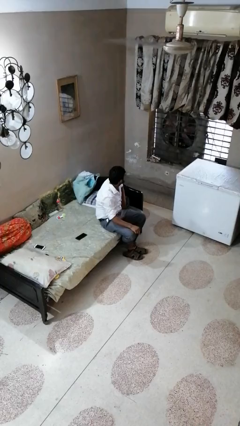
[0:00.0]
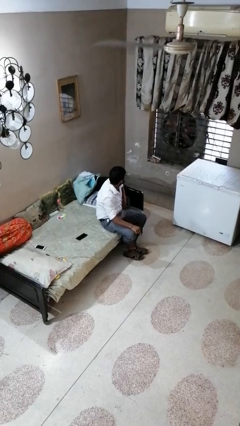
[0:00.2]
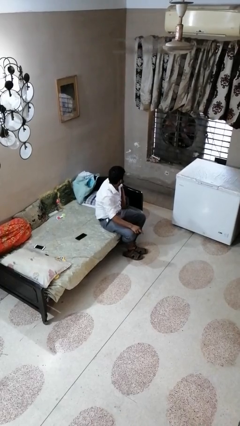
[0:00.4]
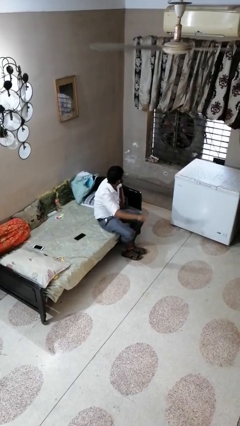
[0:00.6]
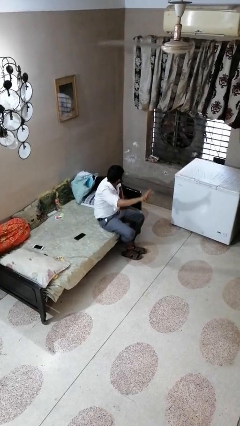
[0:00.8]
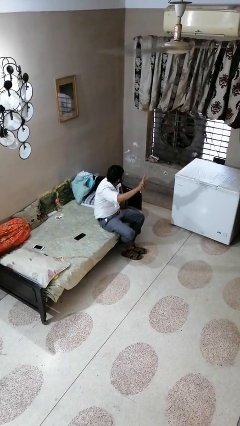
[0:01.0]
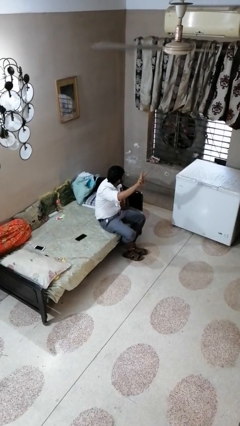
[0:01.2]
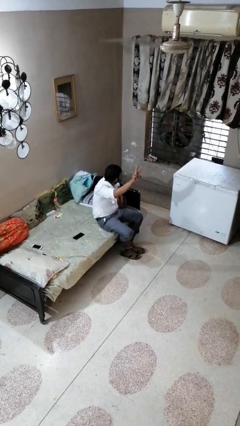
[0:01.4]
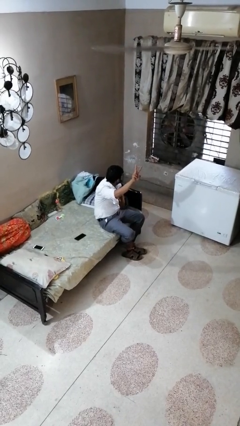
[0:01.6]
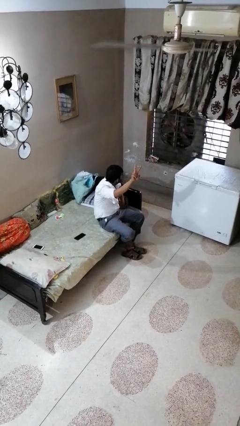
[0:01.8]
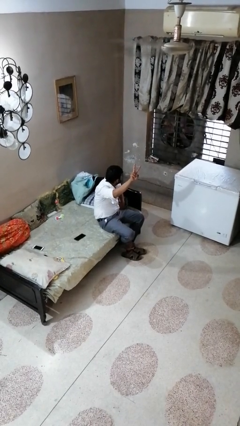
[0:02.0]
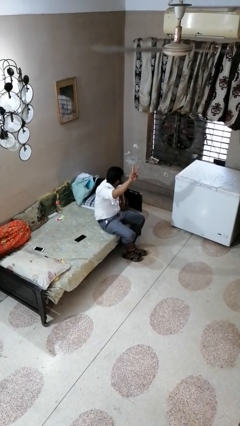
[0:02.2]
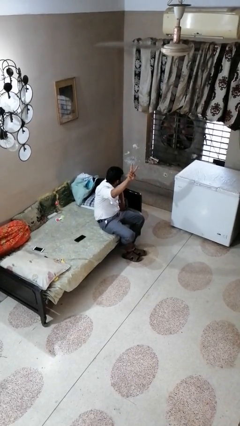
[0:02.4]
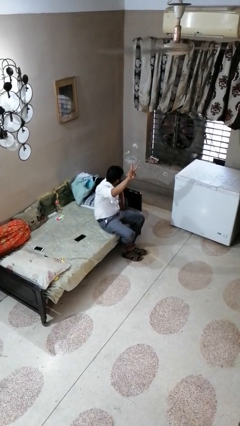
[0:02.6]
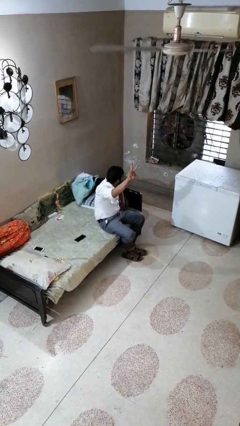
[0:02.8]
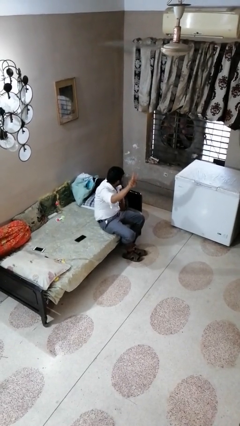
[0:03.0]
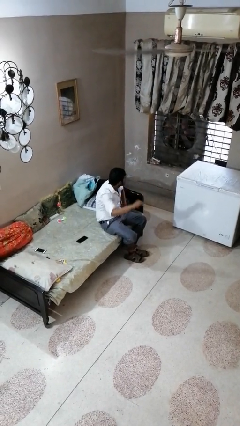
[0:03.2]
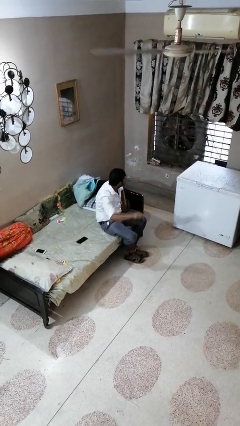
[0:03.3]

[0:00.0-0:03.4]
person gestures peace

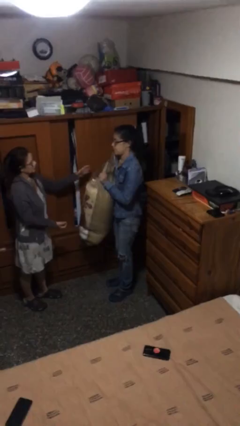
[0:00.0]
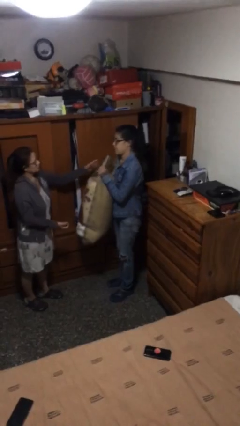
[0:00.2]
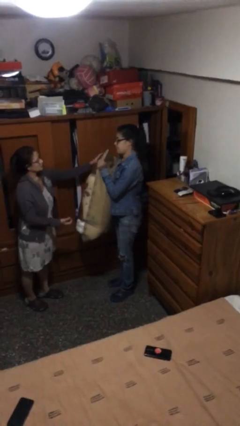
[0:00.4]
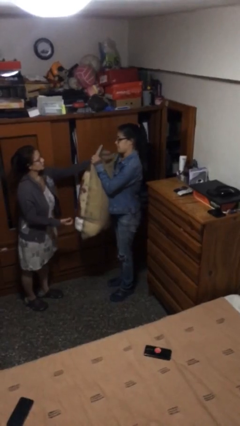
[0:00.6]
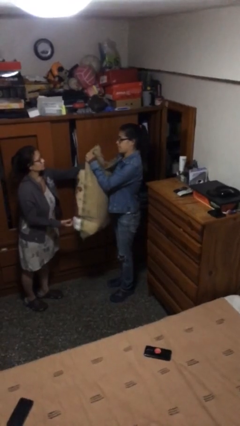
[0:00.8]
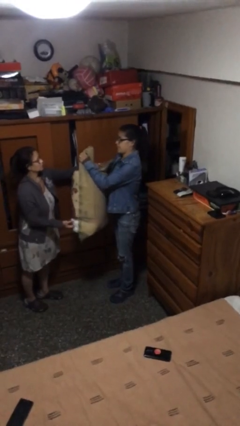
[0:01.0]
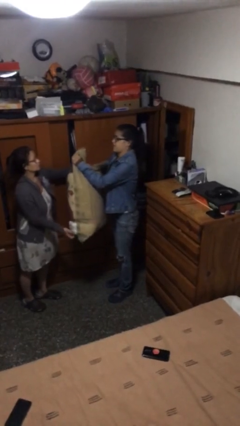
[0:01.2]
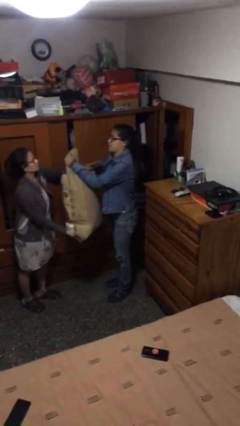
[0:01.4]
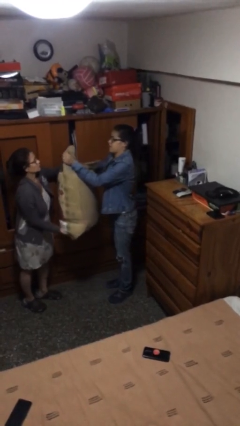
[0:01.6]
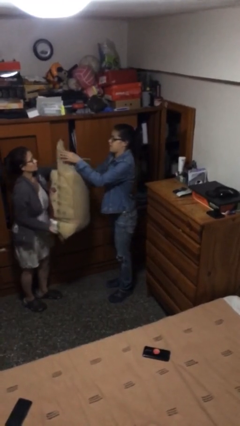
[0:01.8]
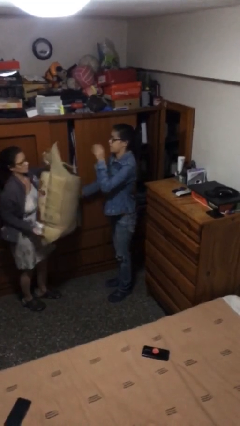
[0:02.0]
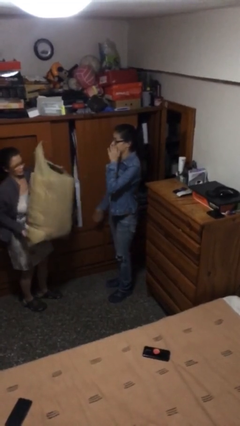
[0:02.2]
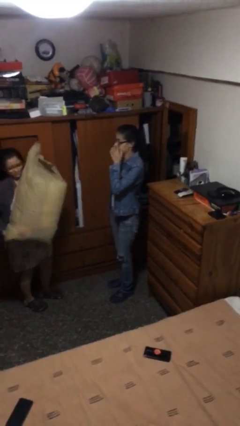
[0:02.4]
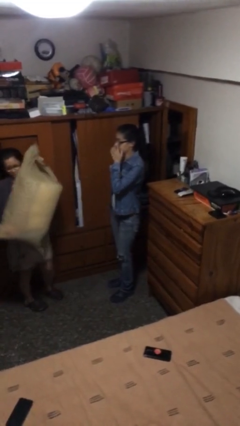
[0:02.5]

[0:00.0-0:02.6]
person transfers object to person

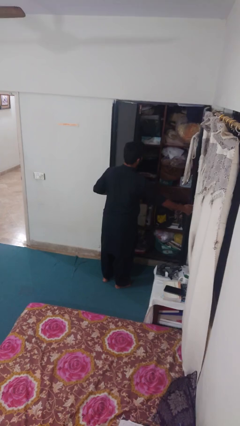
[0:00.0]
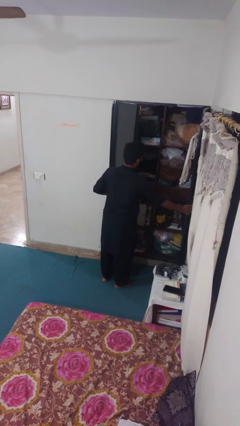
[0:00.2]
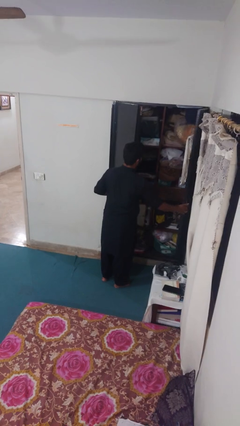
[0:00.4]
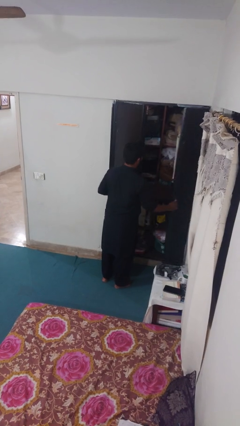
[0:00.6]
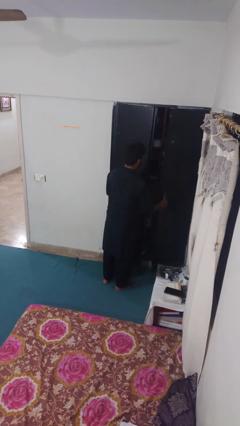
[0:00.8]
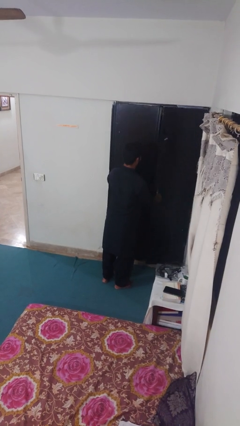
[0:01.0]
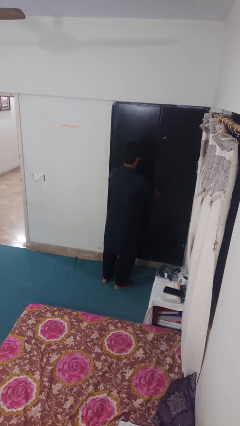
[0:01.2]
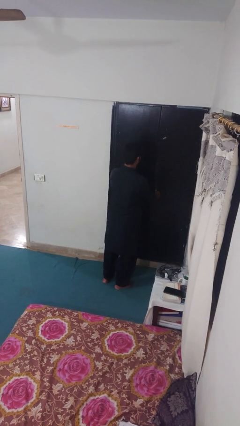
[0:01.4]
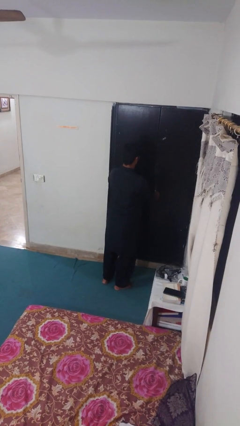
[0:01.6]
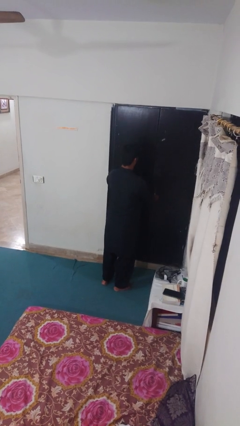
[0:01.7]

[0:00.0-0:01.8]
person closes closet door

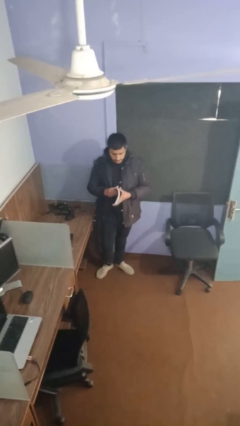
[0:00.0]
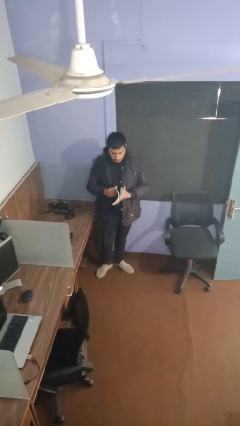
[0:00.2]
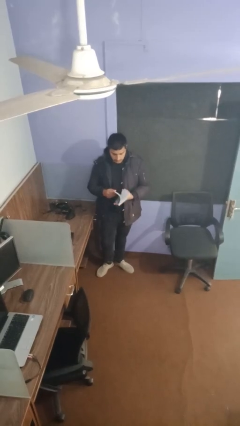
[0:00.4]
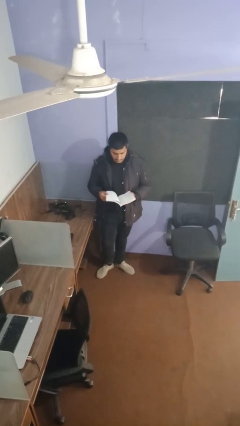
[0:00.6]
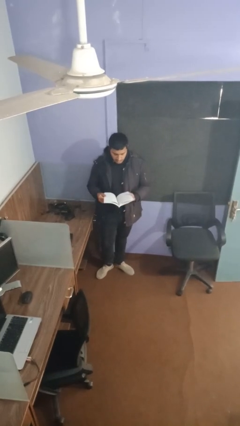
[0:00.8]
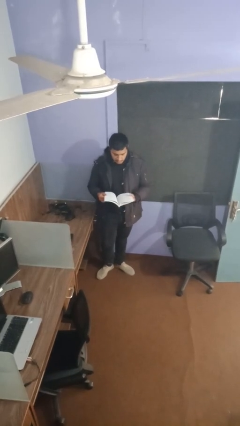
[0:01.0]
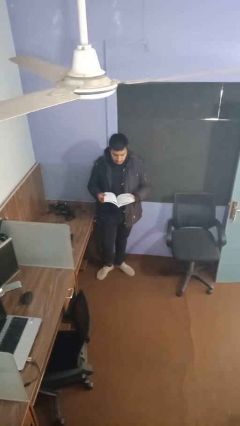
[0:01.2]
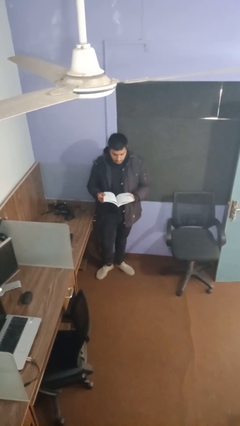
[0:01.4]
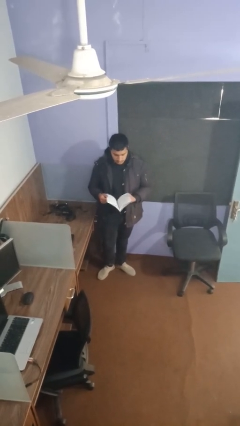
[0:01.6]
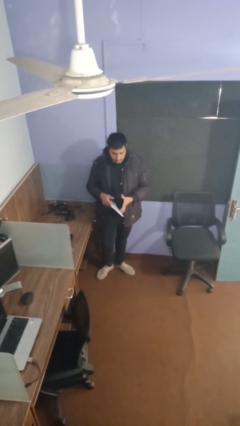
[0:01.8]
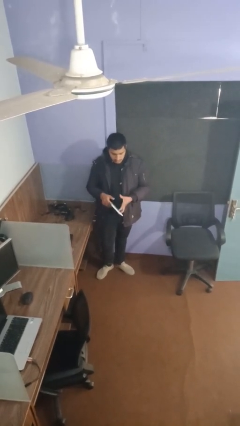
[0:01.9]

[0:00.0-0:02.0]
person reads document

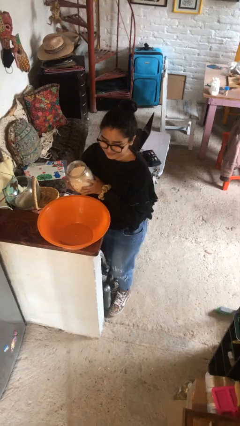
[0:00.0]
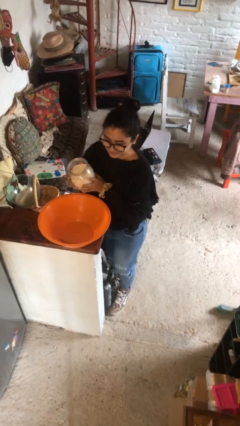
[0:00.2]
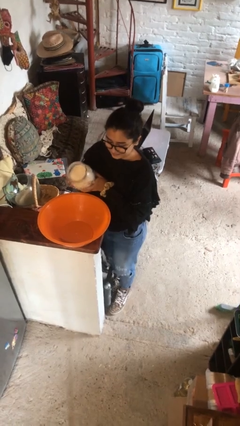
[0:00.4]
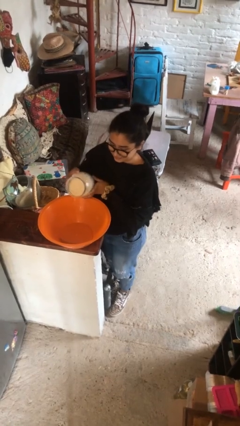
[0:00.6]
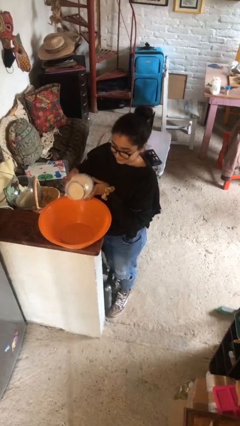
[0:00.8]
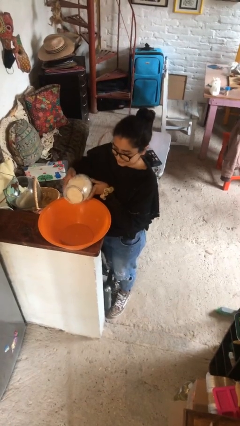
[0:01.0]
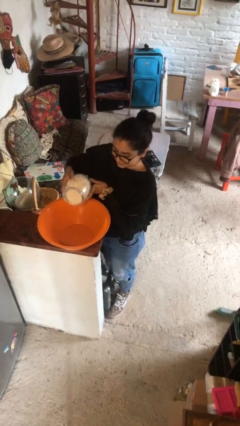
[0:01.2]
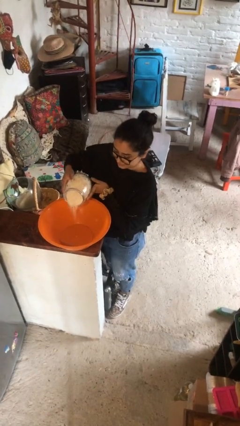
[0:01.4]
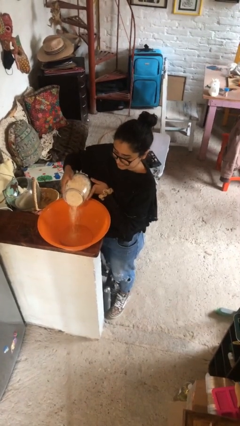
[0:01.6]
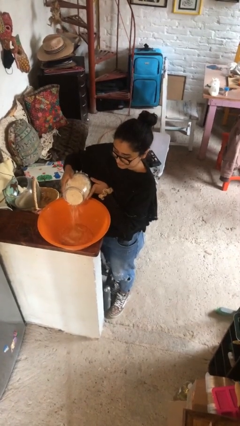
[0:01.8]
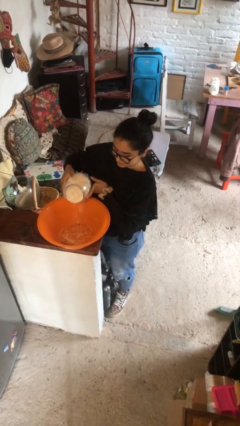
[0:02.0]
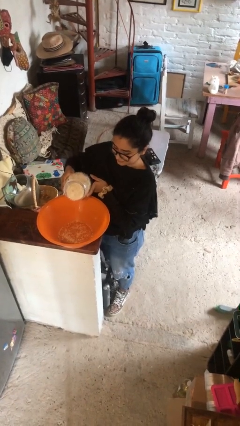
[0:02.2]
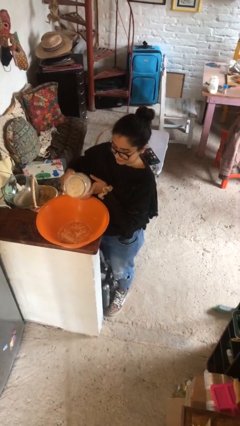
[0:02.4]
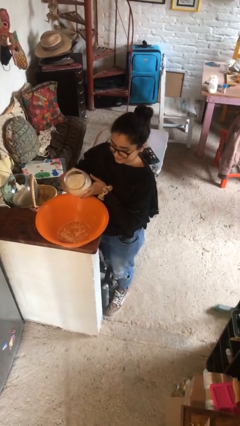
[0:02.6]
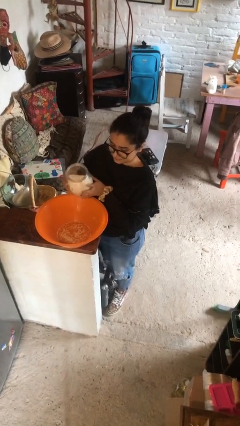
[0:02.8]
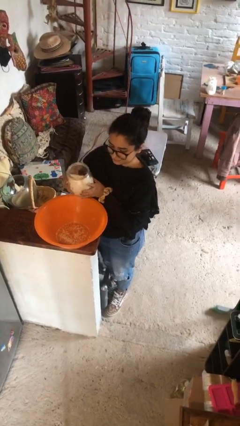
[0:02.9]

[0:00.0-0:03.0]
person pours into bowl

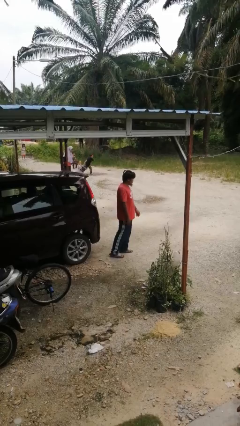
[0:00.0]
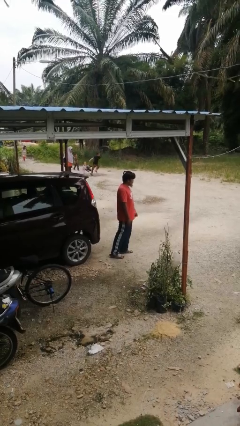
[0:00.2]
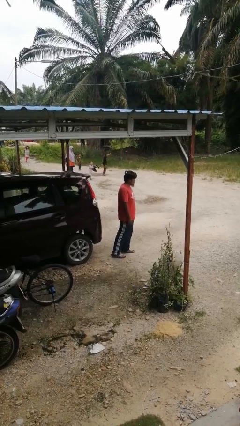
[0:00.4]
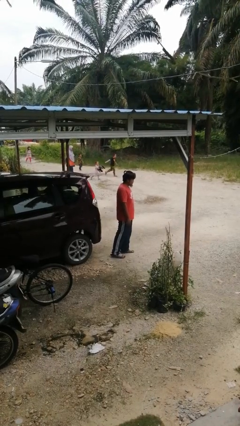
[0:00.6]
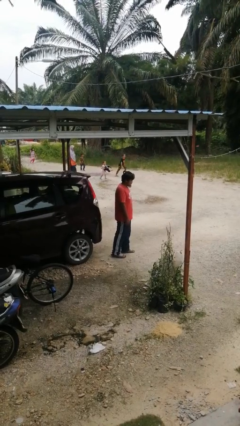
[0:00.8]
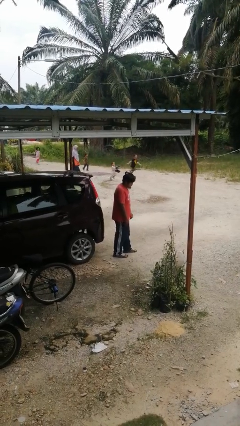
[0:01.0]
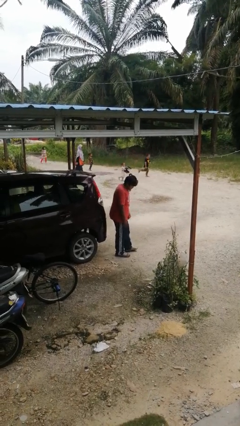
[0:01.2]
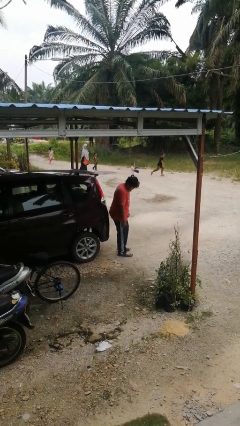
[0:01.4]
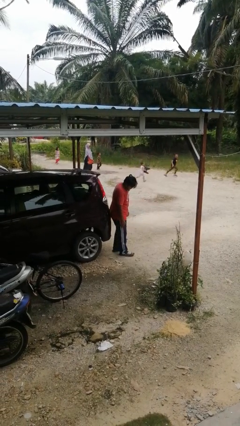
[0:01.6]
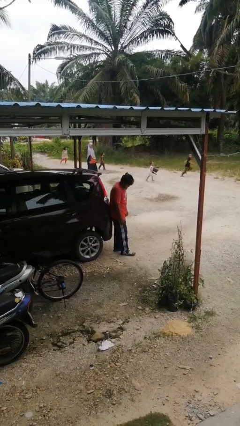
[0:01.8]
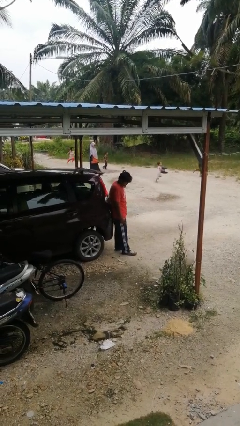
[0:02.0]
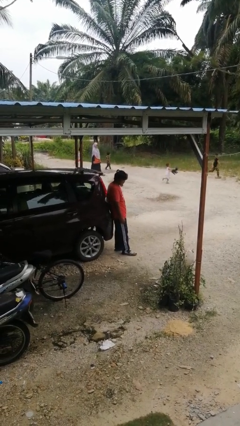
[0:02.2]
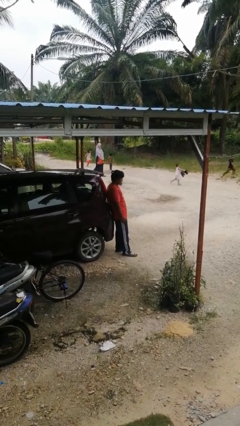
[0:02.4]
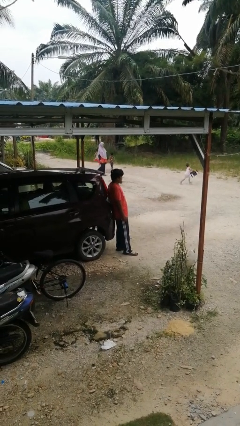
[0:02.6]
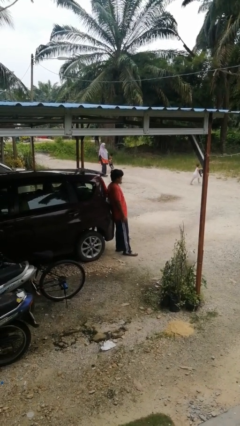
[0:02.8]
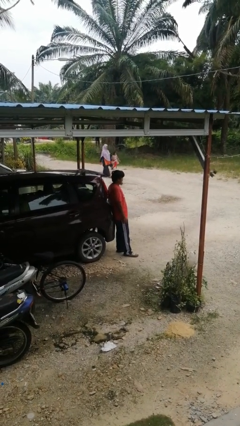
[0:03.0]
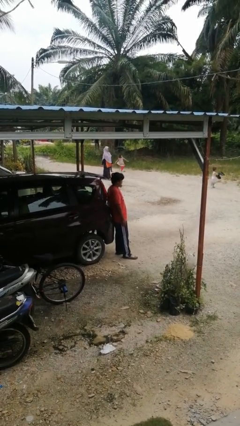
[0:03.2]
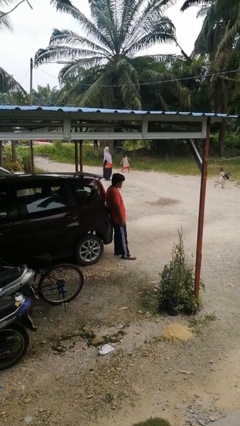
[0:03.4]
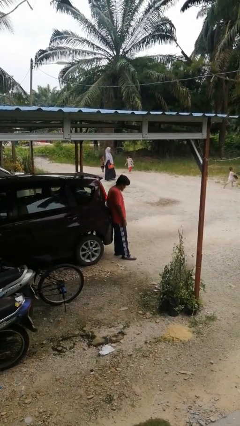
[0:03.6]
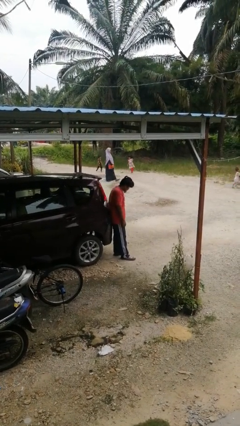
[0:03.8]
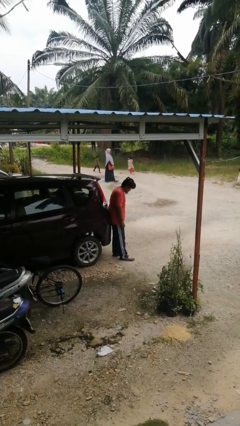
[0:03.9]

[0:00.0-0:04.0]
person leans against car

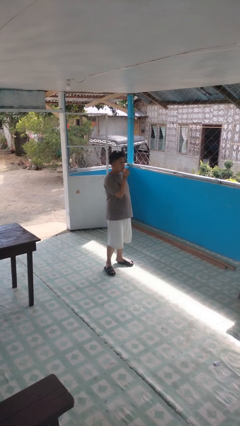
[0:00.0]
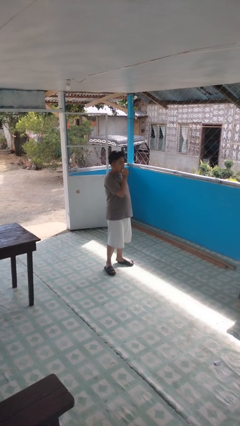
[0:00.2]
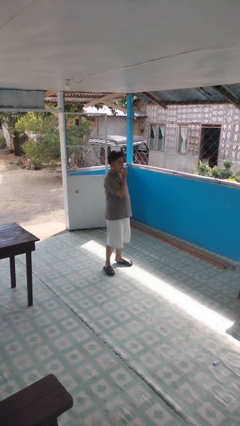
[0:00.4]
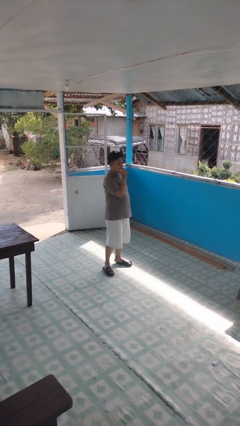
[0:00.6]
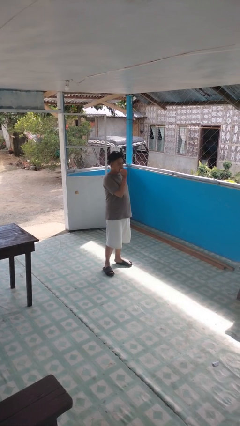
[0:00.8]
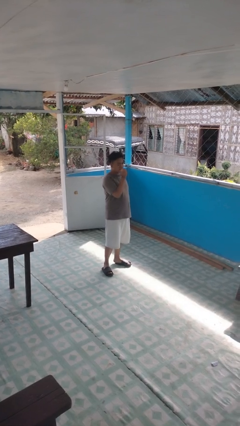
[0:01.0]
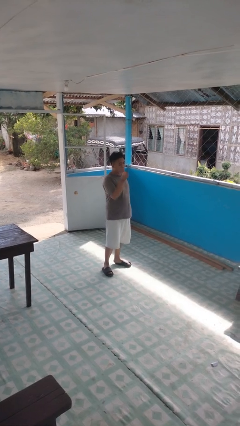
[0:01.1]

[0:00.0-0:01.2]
person eats apple
